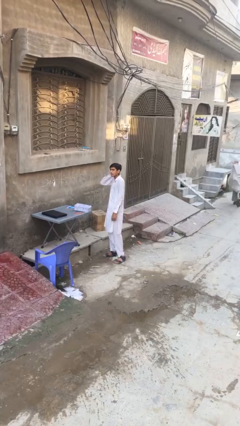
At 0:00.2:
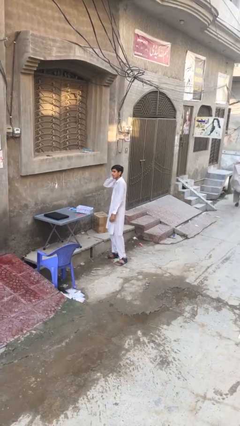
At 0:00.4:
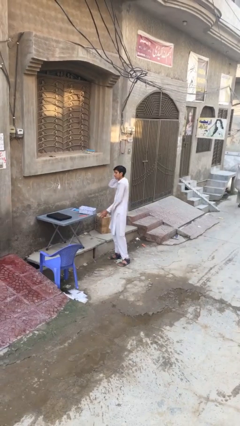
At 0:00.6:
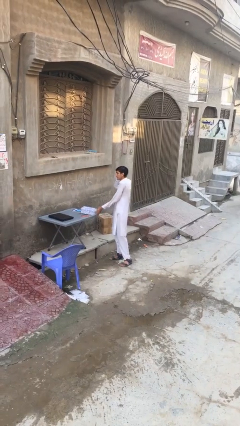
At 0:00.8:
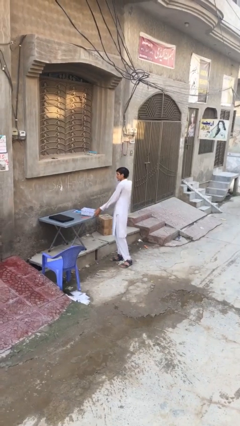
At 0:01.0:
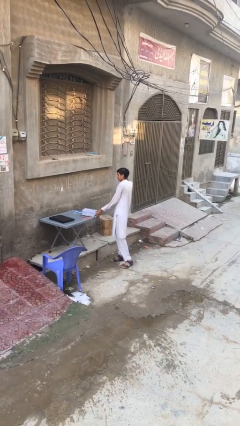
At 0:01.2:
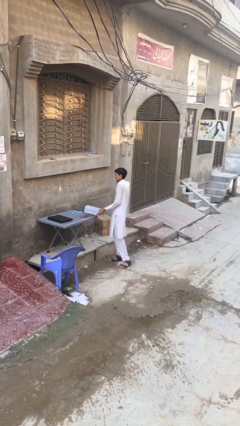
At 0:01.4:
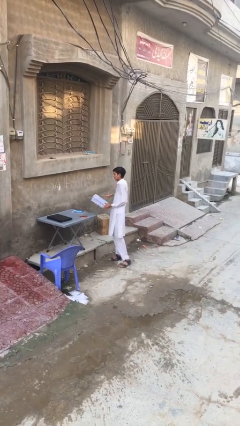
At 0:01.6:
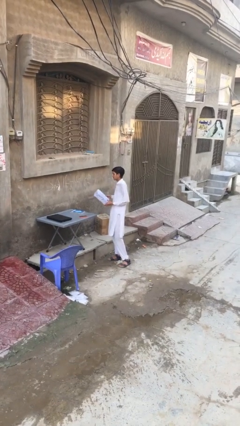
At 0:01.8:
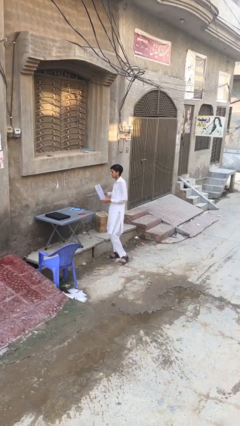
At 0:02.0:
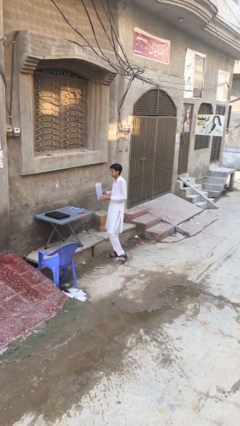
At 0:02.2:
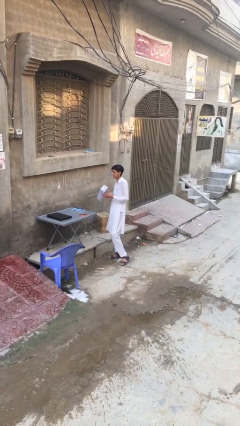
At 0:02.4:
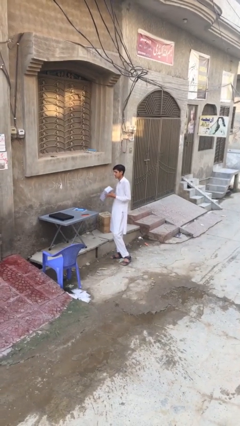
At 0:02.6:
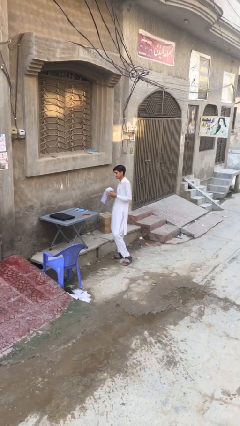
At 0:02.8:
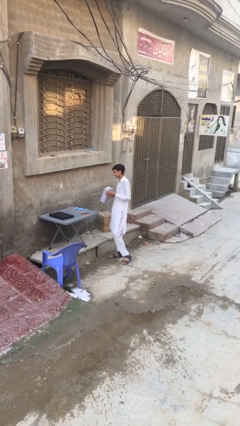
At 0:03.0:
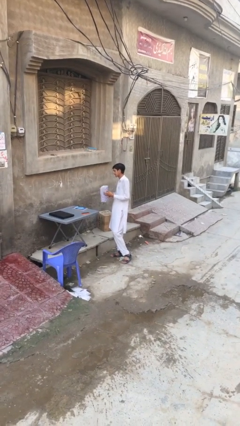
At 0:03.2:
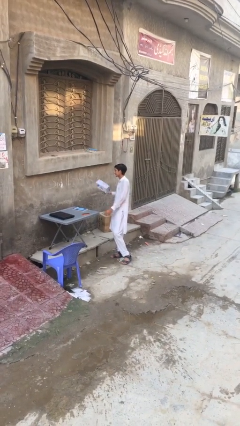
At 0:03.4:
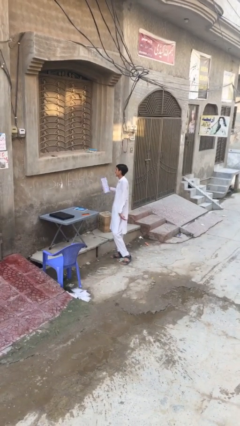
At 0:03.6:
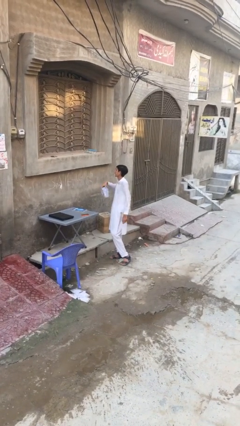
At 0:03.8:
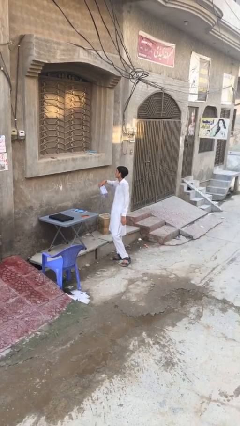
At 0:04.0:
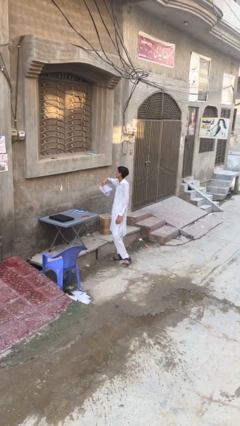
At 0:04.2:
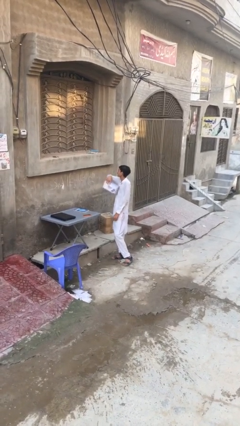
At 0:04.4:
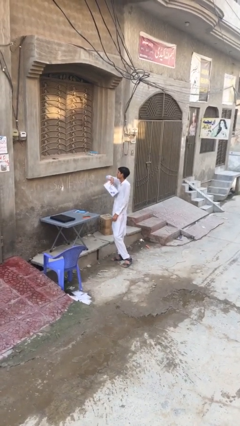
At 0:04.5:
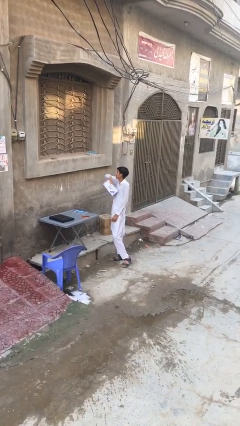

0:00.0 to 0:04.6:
person picks up object from table

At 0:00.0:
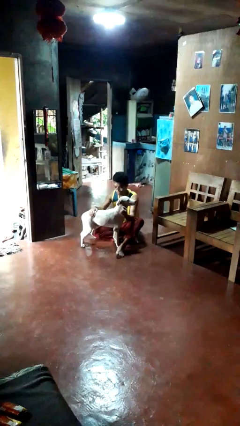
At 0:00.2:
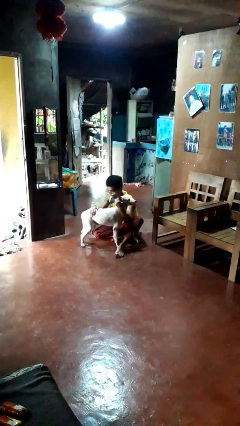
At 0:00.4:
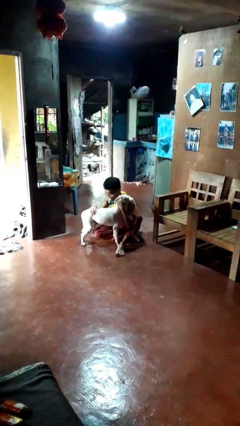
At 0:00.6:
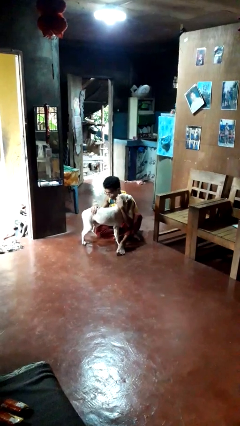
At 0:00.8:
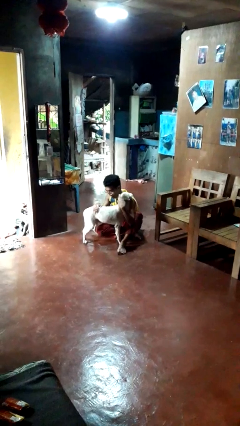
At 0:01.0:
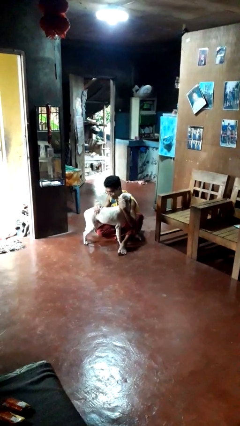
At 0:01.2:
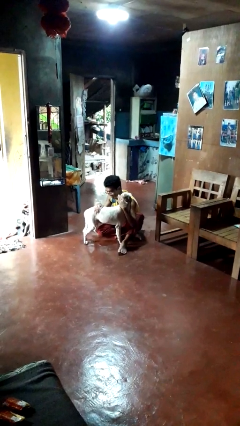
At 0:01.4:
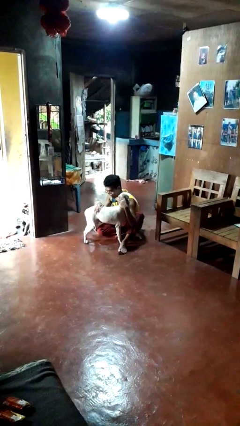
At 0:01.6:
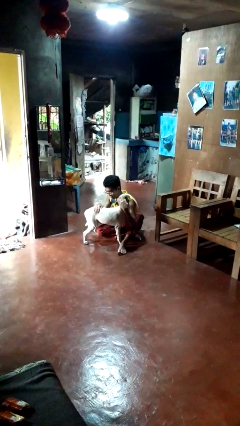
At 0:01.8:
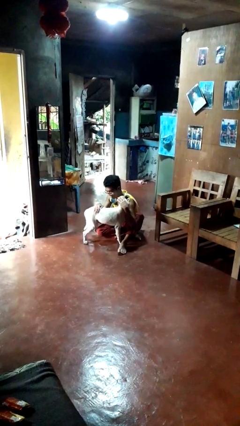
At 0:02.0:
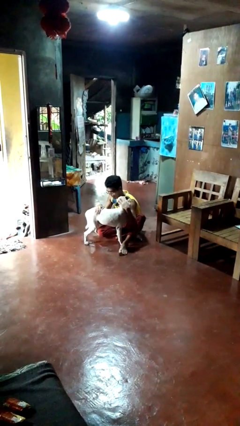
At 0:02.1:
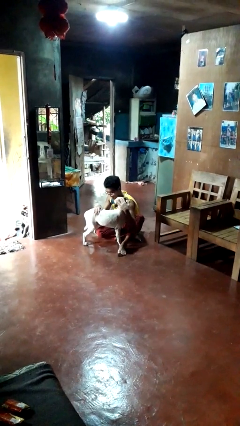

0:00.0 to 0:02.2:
person hugs dog

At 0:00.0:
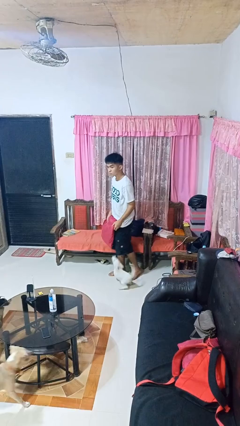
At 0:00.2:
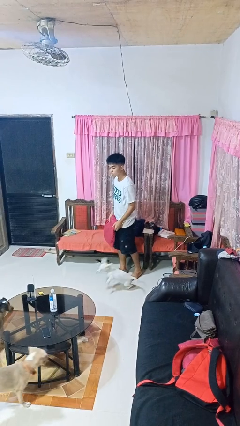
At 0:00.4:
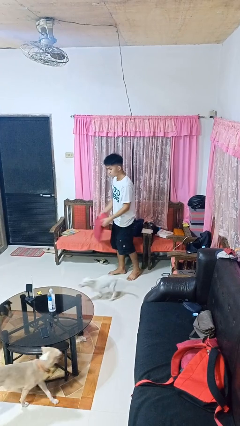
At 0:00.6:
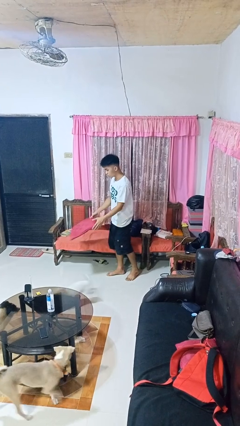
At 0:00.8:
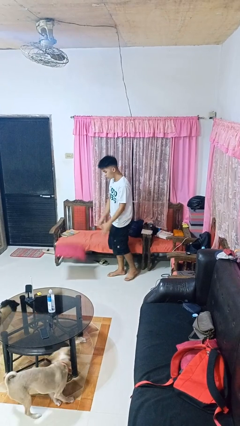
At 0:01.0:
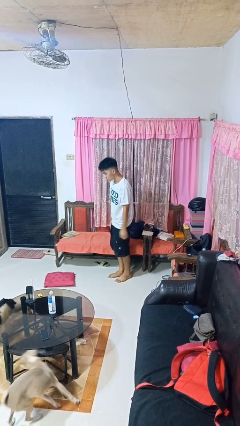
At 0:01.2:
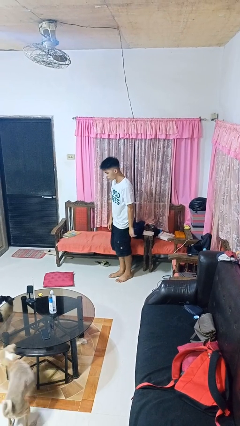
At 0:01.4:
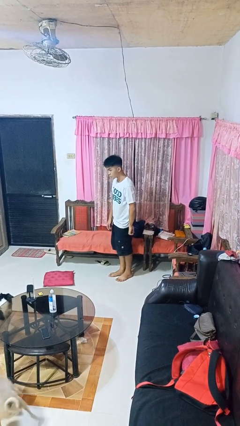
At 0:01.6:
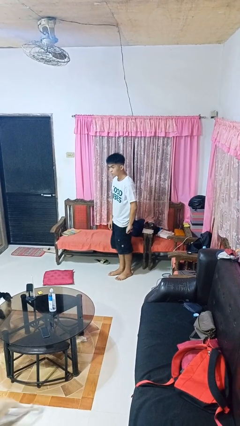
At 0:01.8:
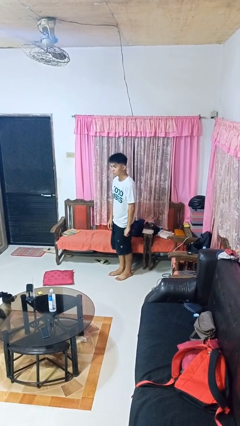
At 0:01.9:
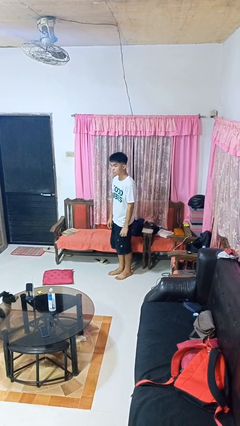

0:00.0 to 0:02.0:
person throws object to ground

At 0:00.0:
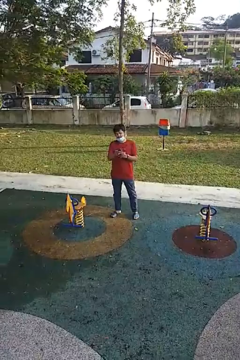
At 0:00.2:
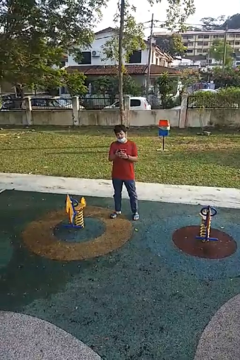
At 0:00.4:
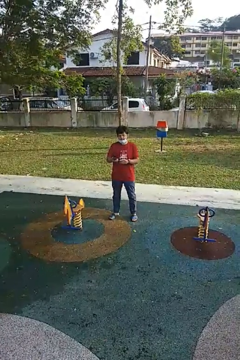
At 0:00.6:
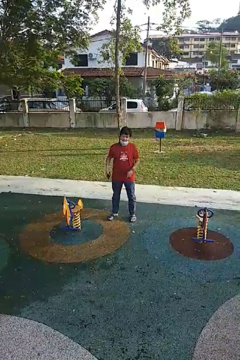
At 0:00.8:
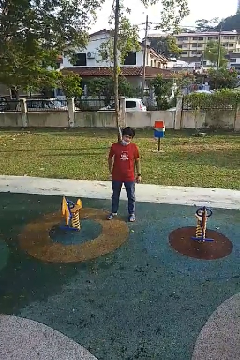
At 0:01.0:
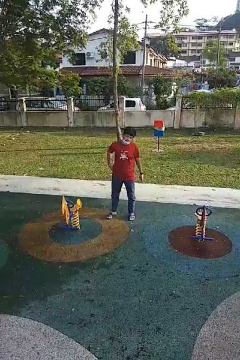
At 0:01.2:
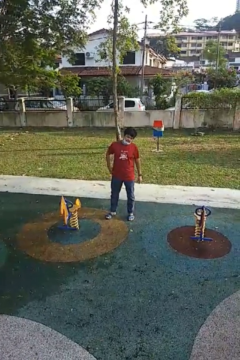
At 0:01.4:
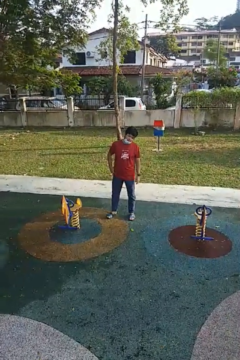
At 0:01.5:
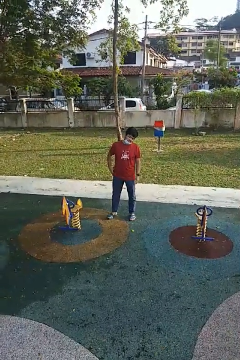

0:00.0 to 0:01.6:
person puts phone into pocket

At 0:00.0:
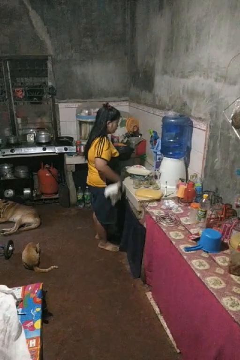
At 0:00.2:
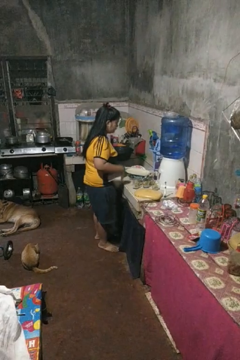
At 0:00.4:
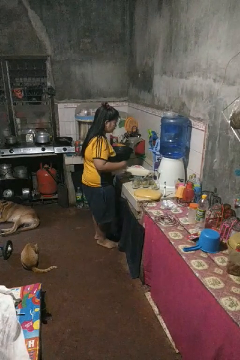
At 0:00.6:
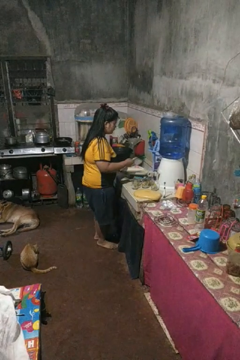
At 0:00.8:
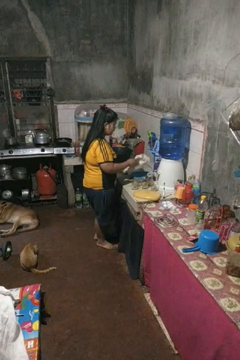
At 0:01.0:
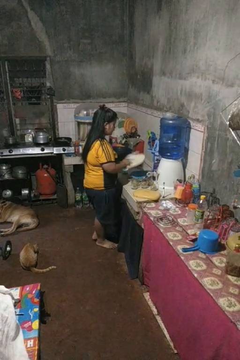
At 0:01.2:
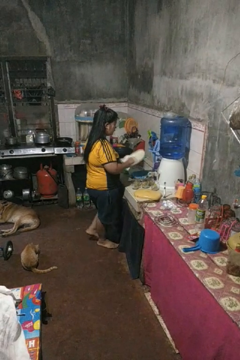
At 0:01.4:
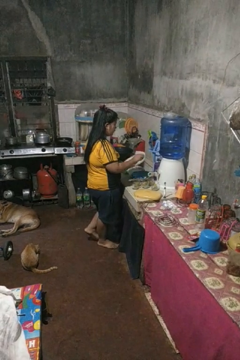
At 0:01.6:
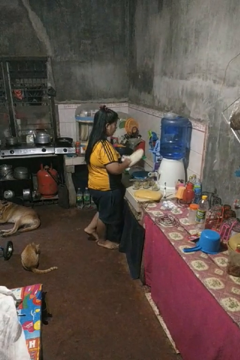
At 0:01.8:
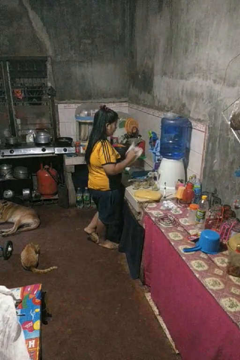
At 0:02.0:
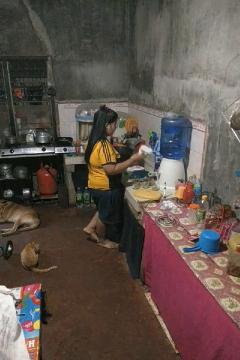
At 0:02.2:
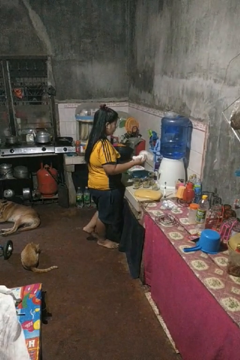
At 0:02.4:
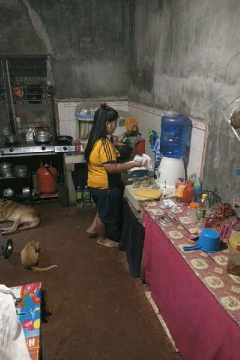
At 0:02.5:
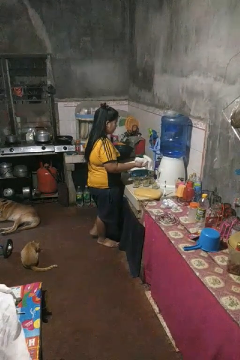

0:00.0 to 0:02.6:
person dries dish

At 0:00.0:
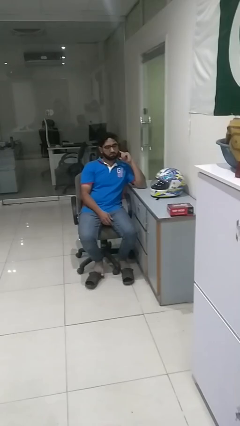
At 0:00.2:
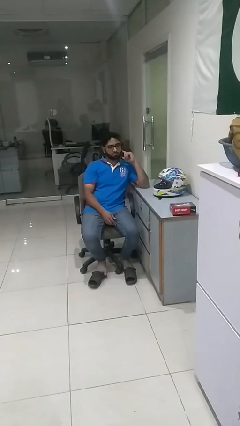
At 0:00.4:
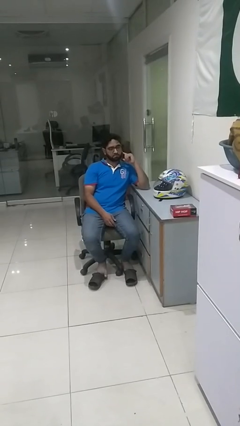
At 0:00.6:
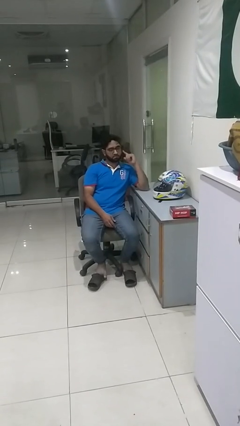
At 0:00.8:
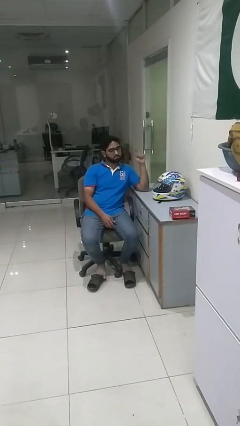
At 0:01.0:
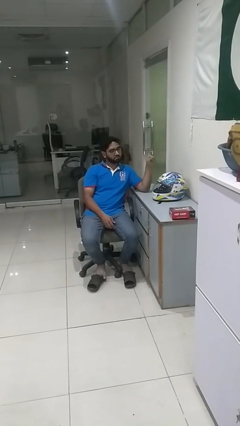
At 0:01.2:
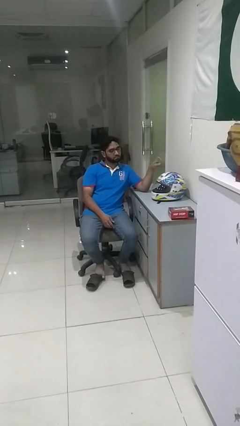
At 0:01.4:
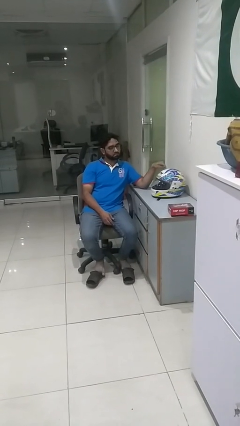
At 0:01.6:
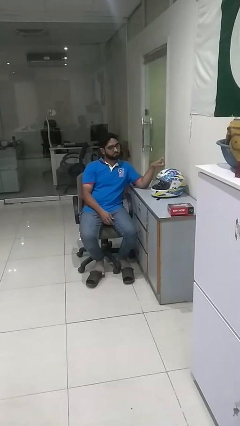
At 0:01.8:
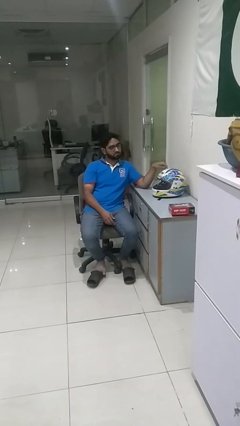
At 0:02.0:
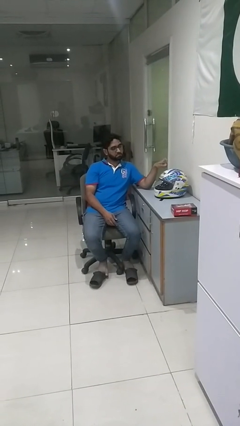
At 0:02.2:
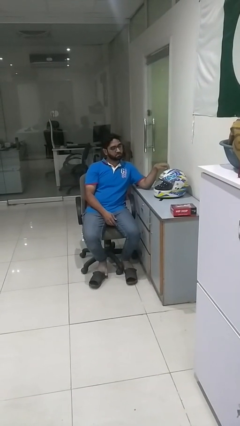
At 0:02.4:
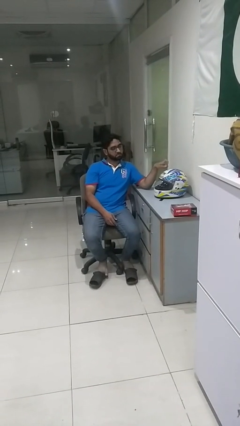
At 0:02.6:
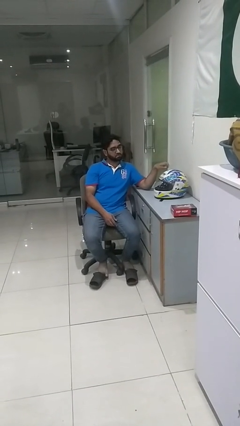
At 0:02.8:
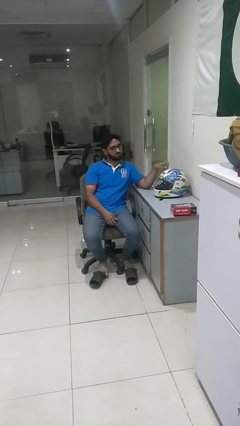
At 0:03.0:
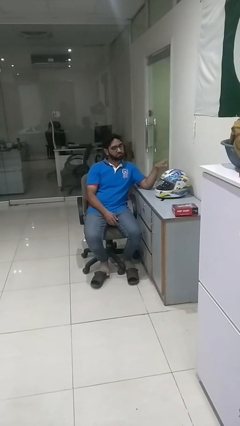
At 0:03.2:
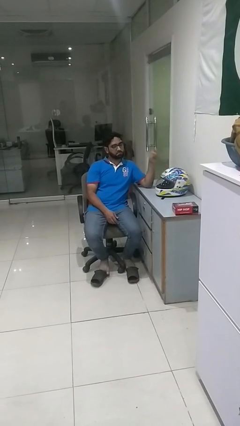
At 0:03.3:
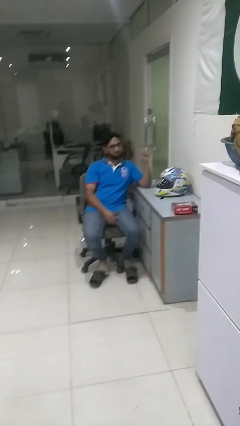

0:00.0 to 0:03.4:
person taps object with finger

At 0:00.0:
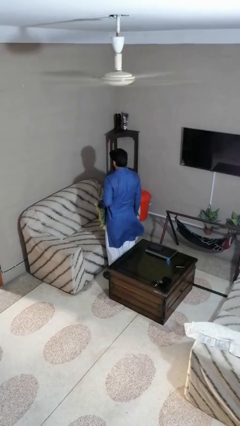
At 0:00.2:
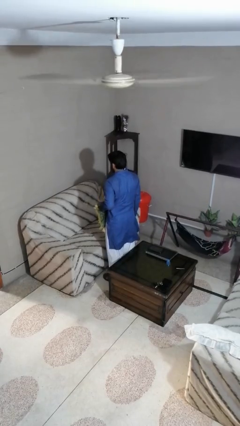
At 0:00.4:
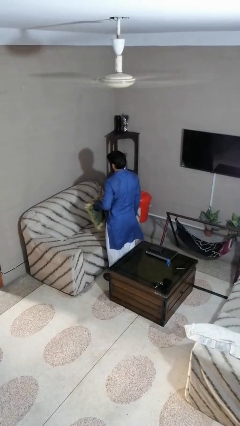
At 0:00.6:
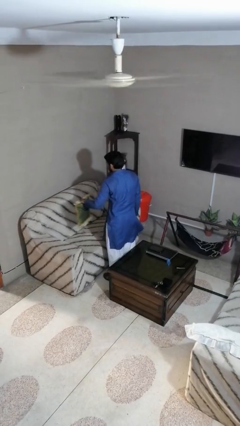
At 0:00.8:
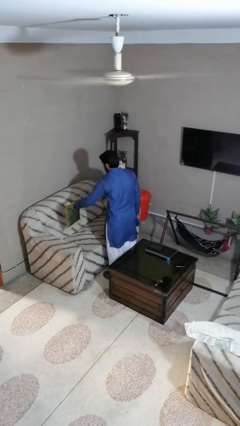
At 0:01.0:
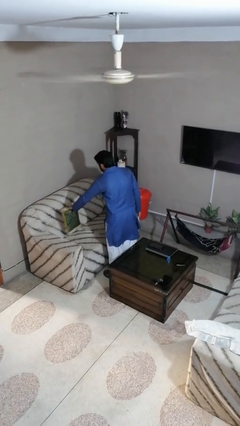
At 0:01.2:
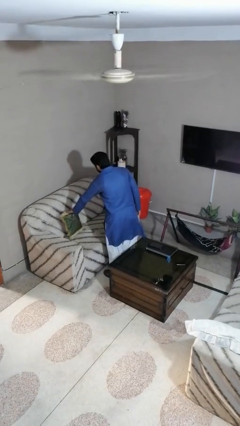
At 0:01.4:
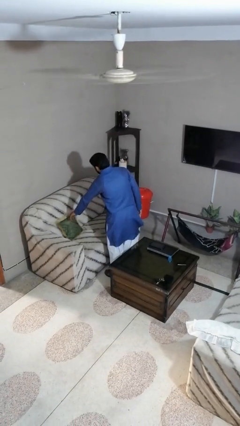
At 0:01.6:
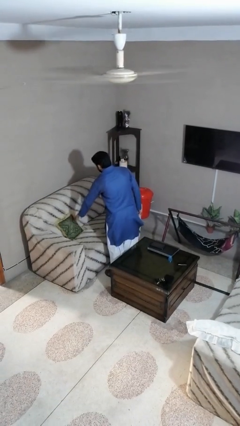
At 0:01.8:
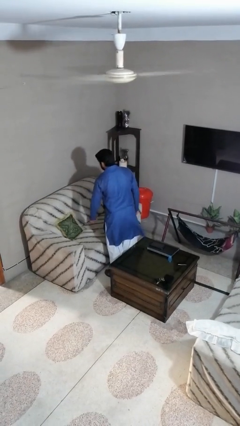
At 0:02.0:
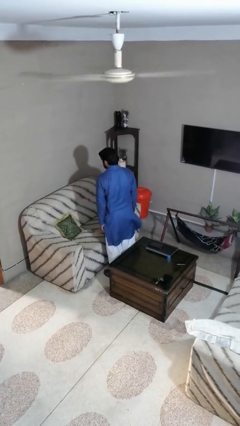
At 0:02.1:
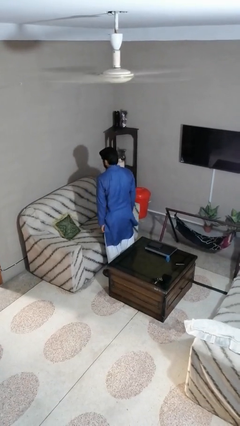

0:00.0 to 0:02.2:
person puts down object on couch
